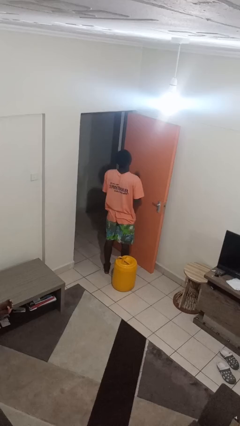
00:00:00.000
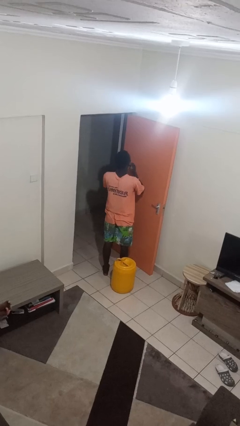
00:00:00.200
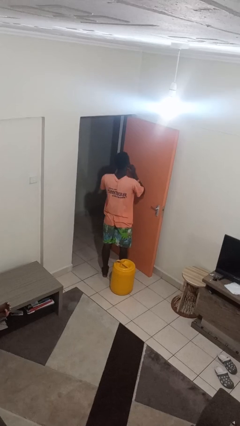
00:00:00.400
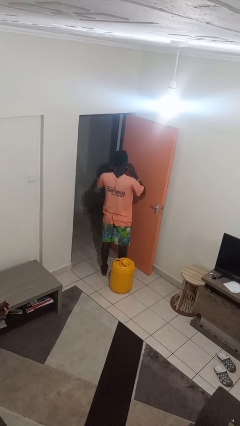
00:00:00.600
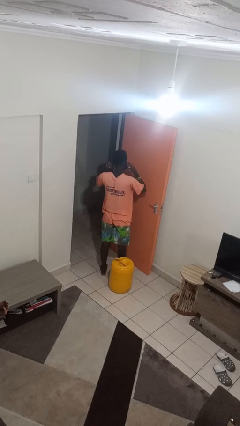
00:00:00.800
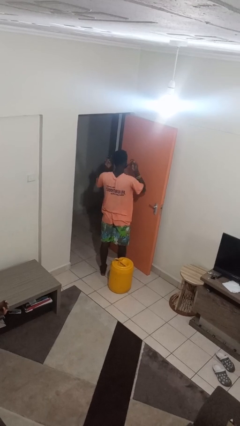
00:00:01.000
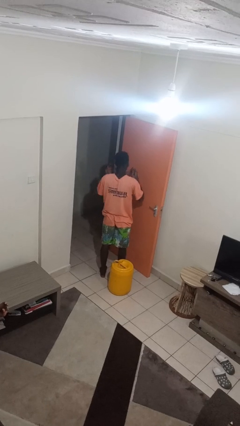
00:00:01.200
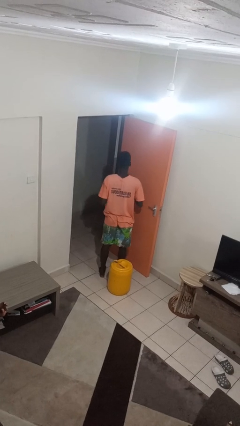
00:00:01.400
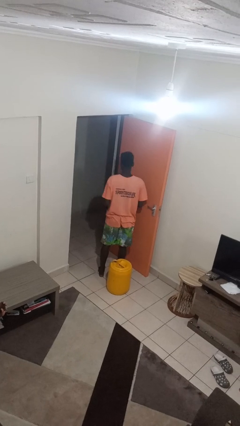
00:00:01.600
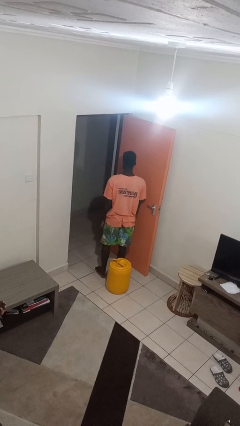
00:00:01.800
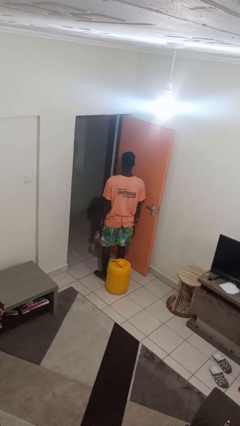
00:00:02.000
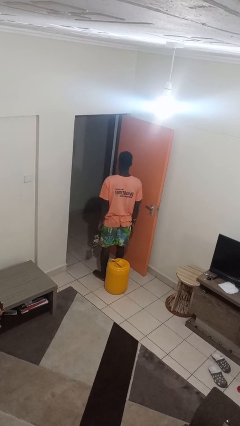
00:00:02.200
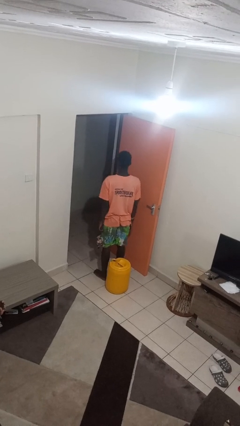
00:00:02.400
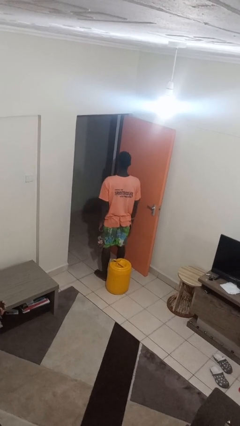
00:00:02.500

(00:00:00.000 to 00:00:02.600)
person takes off facemask

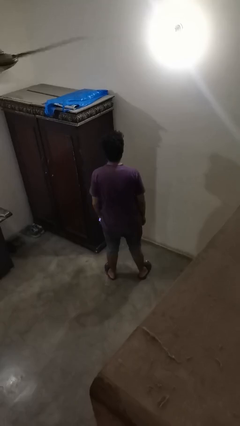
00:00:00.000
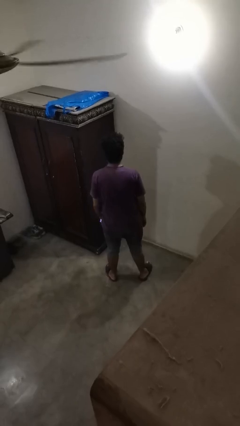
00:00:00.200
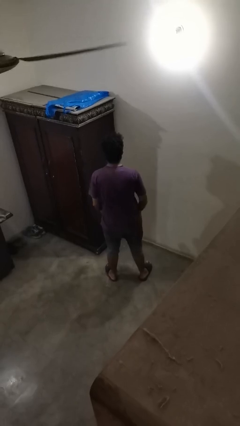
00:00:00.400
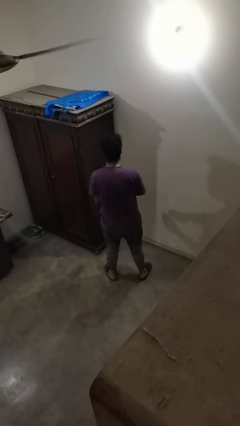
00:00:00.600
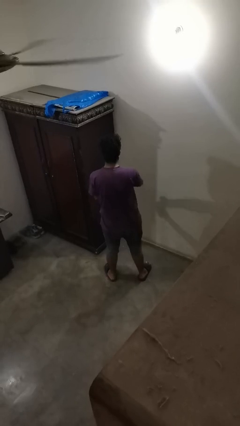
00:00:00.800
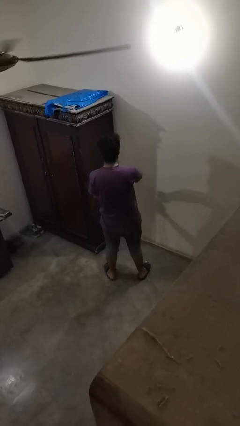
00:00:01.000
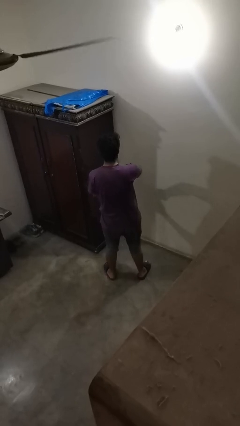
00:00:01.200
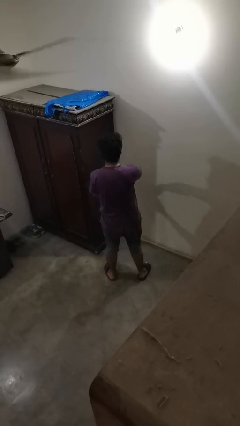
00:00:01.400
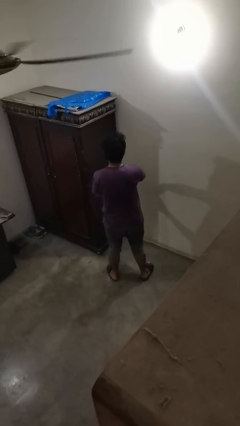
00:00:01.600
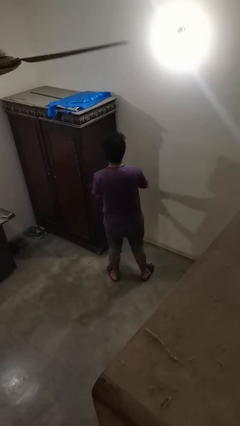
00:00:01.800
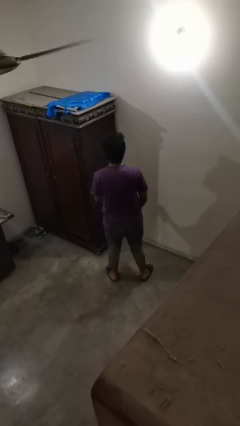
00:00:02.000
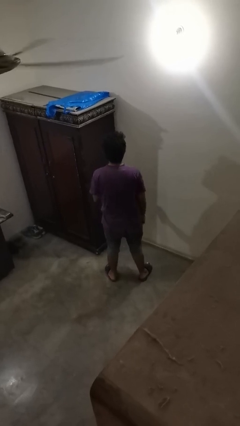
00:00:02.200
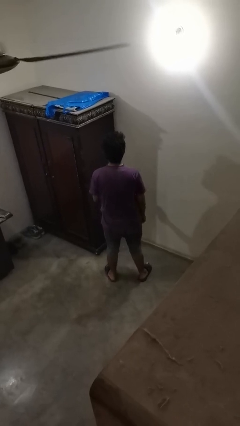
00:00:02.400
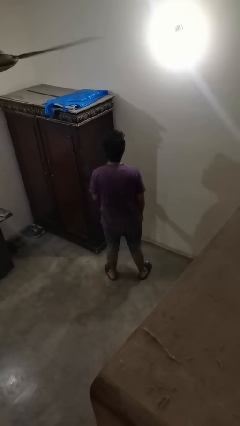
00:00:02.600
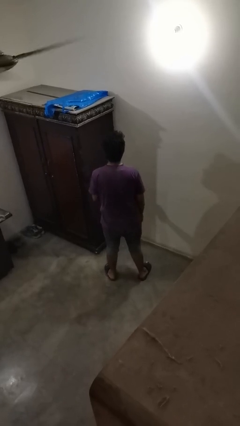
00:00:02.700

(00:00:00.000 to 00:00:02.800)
person opens beverage can

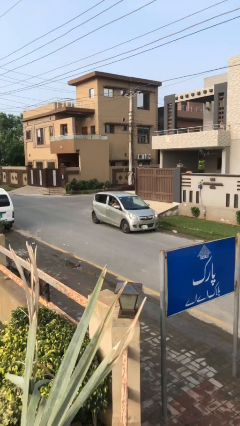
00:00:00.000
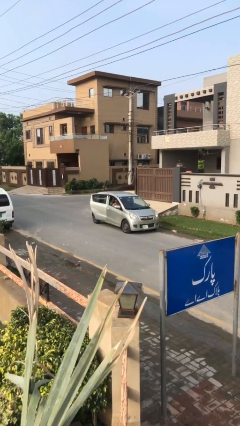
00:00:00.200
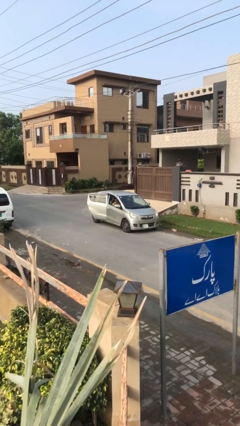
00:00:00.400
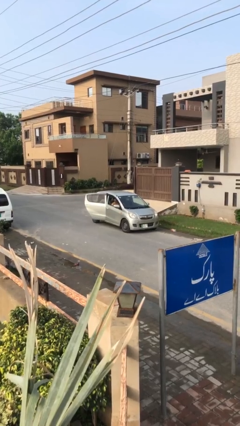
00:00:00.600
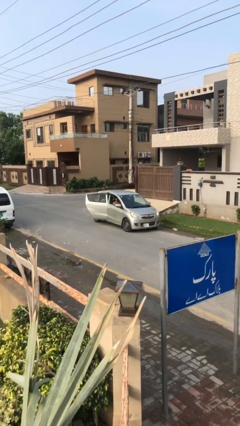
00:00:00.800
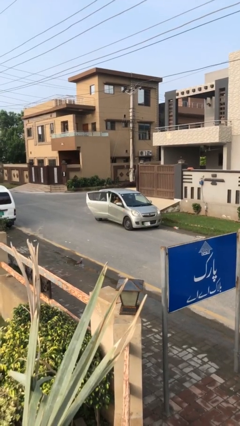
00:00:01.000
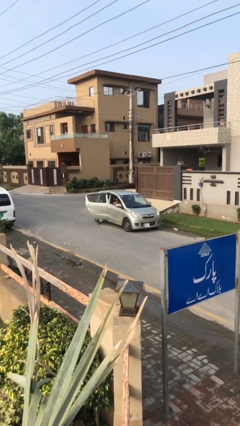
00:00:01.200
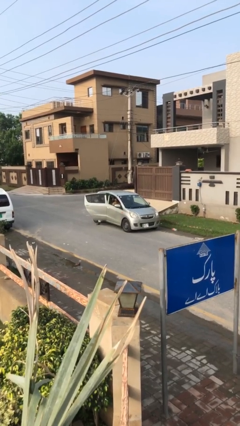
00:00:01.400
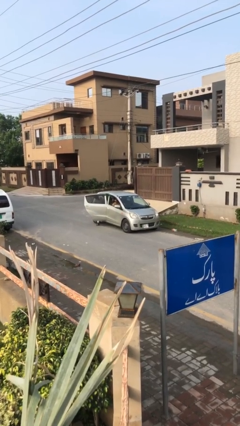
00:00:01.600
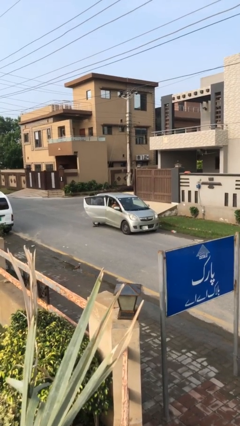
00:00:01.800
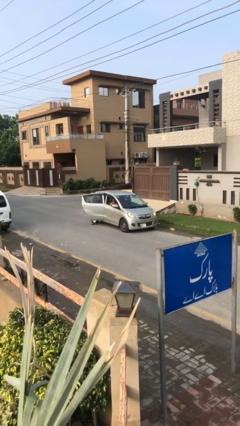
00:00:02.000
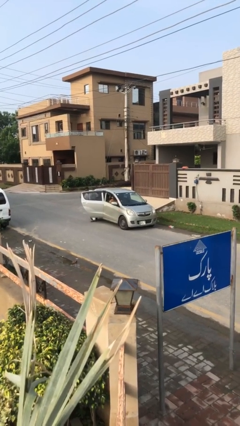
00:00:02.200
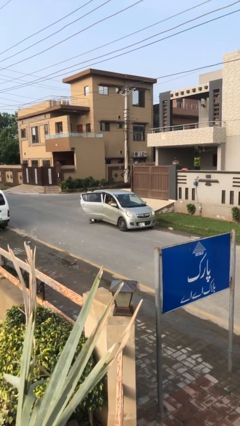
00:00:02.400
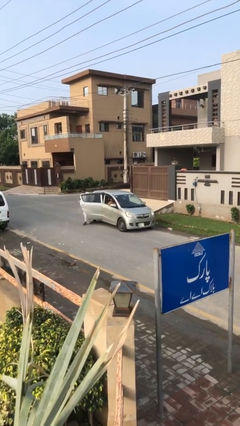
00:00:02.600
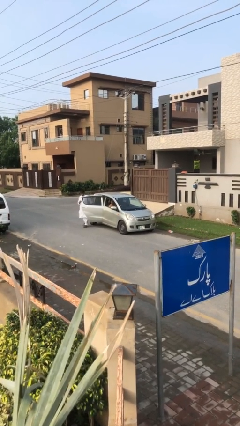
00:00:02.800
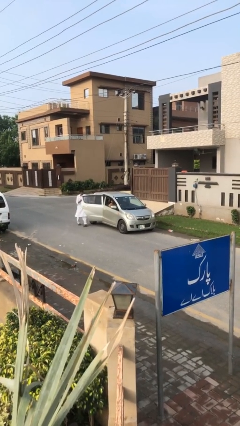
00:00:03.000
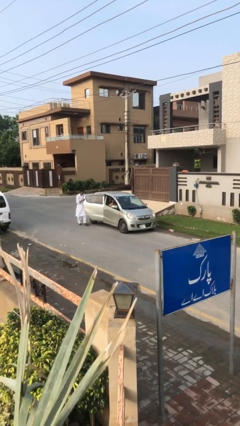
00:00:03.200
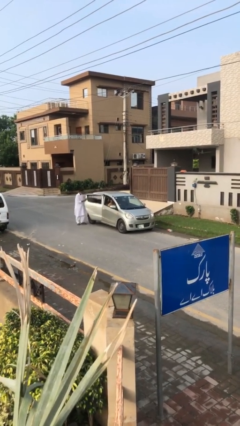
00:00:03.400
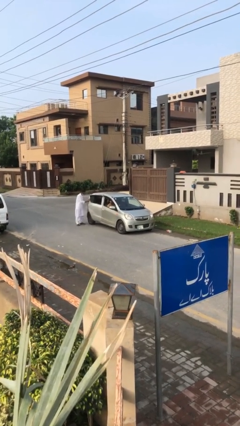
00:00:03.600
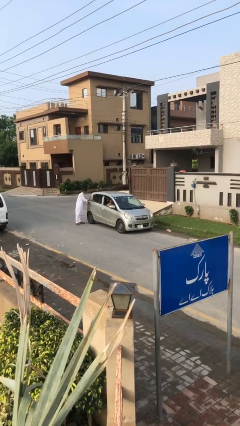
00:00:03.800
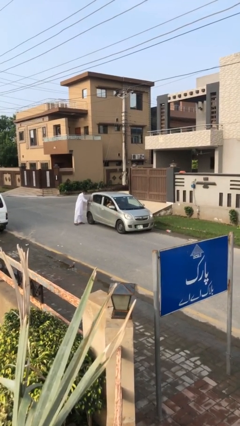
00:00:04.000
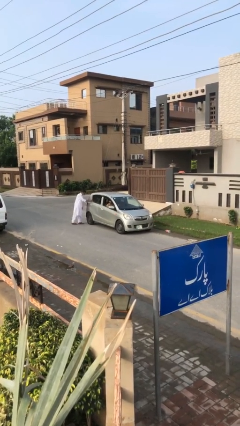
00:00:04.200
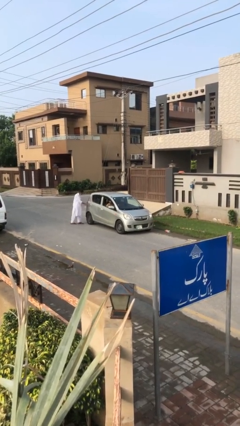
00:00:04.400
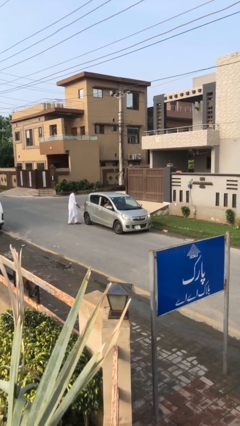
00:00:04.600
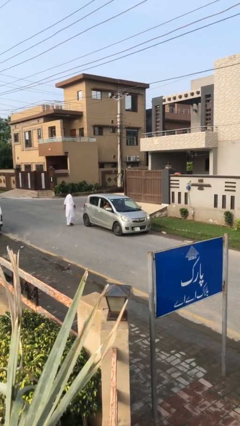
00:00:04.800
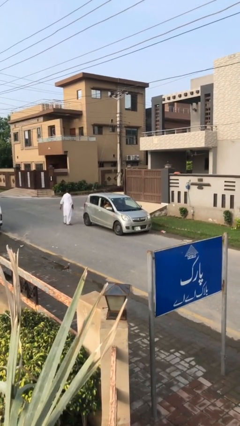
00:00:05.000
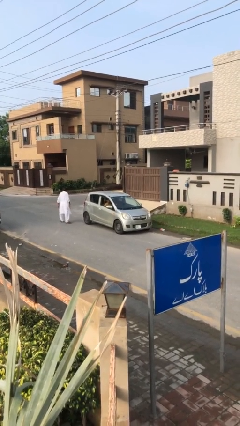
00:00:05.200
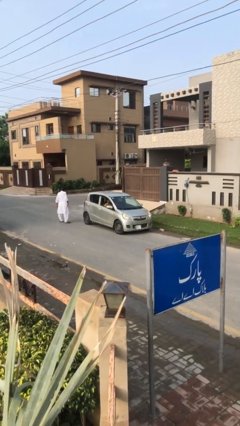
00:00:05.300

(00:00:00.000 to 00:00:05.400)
car drops off person

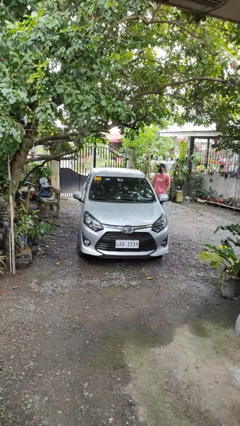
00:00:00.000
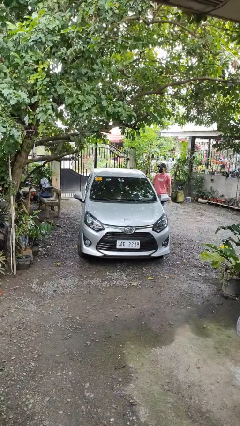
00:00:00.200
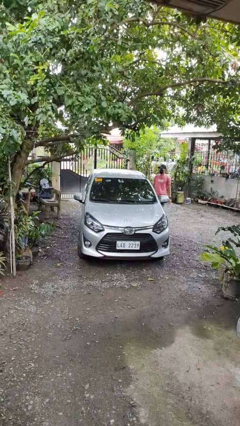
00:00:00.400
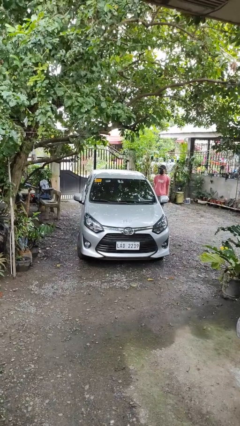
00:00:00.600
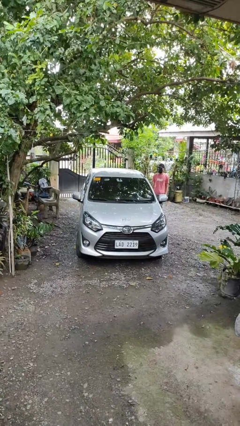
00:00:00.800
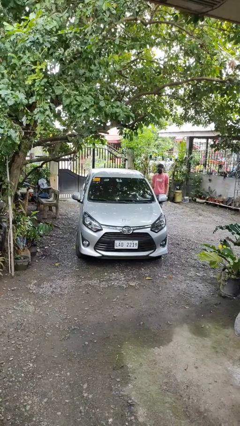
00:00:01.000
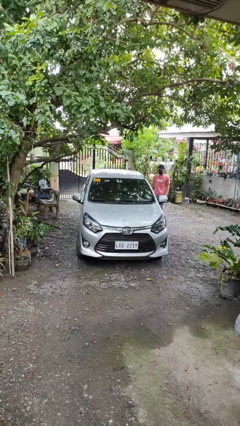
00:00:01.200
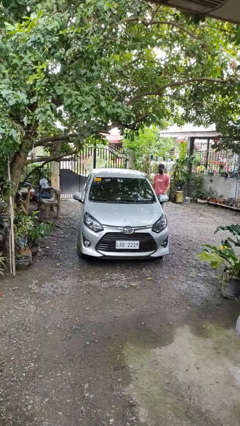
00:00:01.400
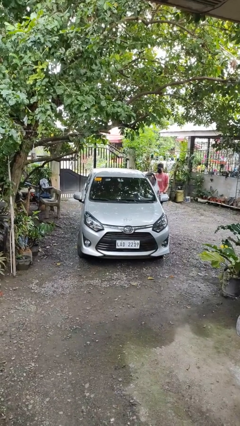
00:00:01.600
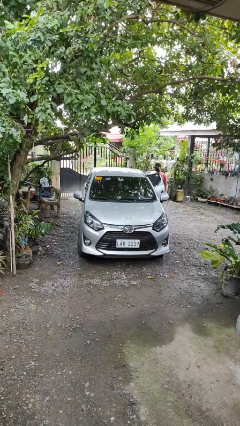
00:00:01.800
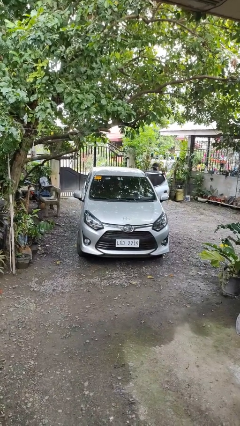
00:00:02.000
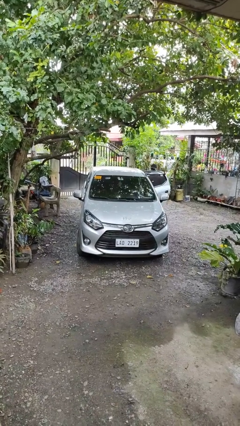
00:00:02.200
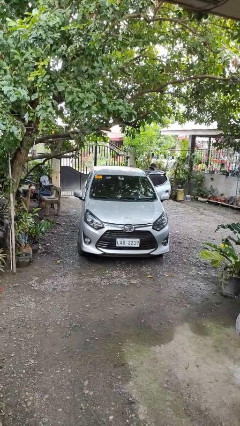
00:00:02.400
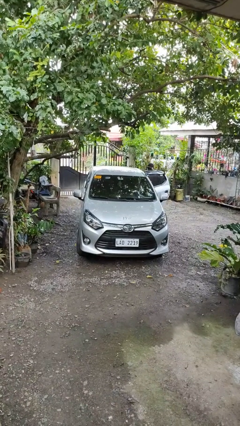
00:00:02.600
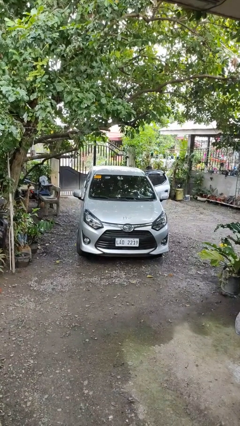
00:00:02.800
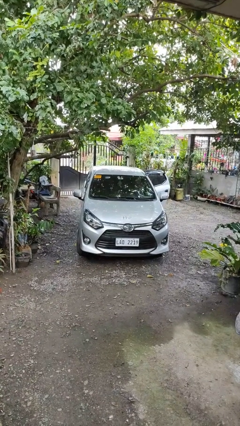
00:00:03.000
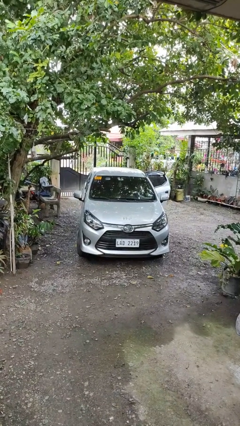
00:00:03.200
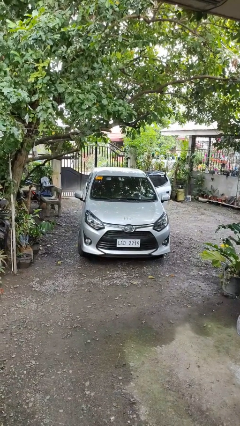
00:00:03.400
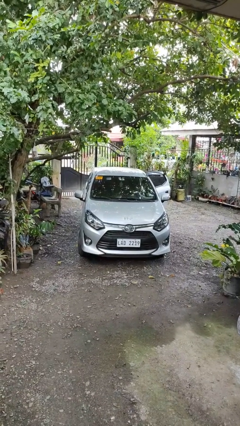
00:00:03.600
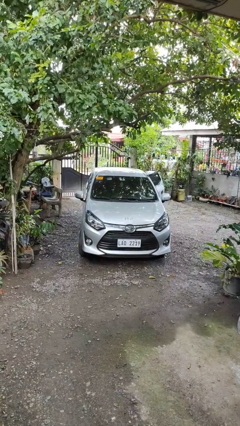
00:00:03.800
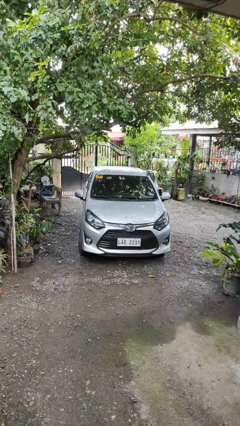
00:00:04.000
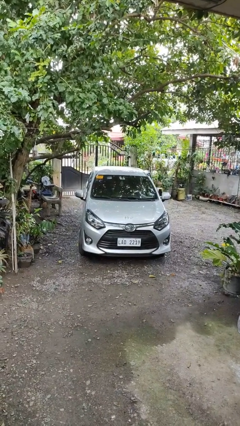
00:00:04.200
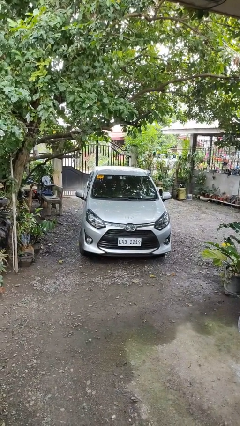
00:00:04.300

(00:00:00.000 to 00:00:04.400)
car picks up person

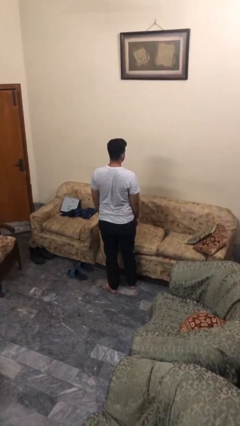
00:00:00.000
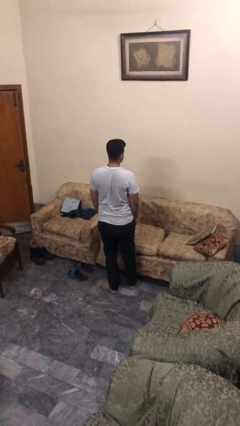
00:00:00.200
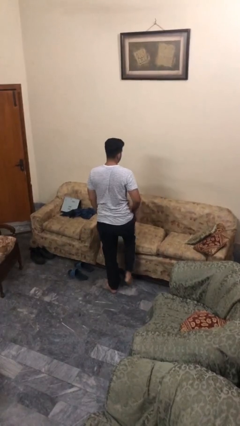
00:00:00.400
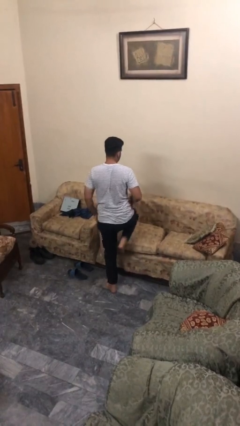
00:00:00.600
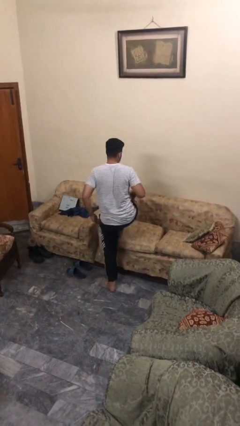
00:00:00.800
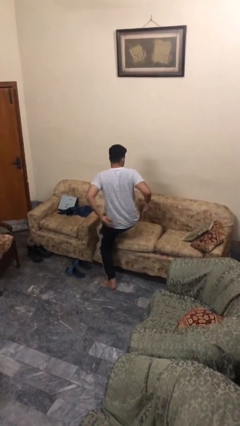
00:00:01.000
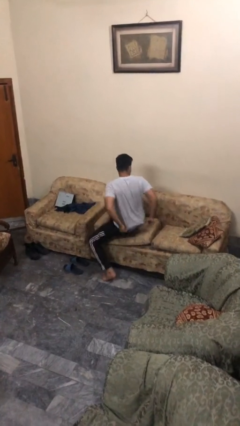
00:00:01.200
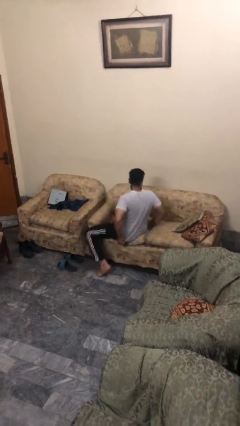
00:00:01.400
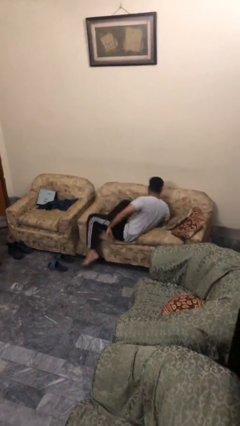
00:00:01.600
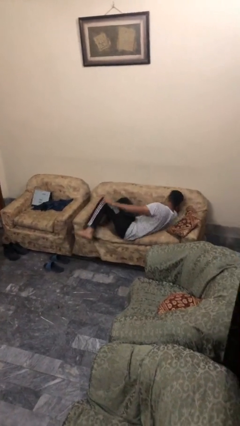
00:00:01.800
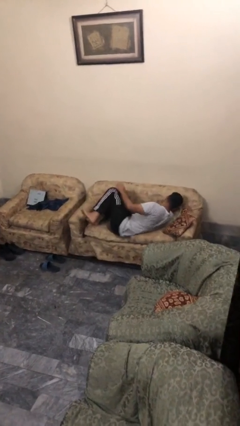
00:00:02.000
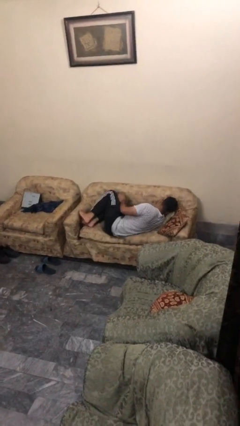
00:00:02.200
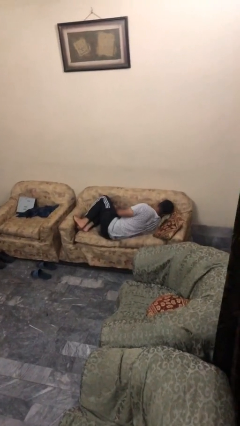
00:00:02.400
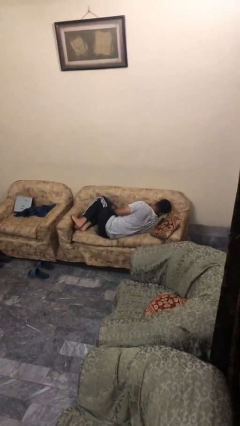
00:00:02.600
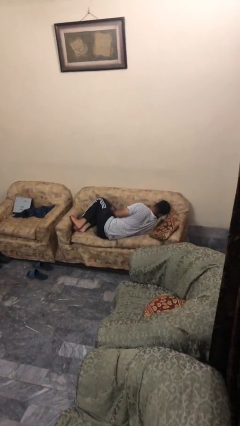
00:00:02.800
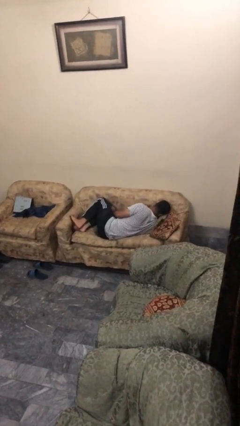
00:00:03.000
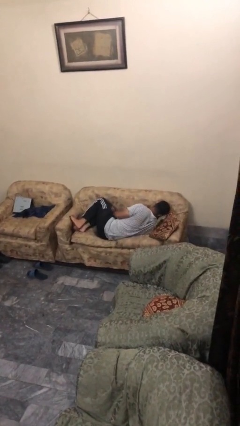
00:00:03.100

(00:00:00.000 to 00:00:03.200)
person lies down on couch
